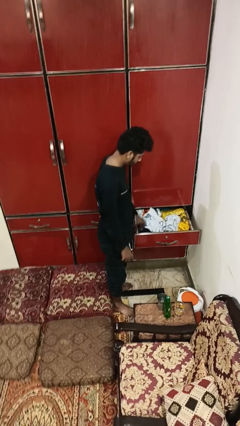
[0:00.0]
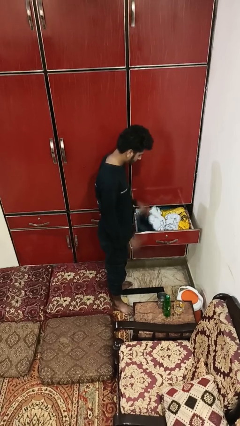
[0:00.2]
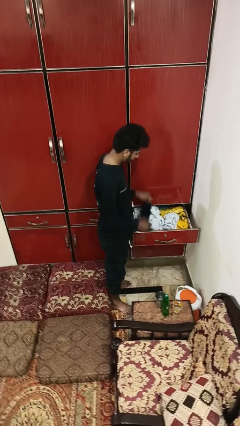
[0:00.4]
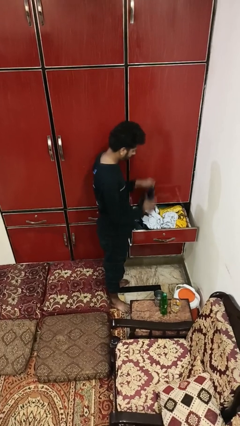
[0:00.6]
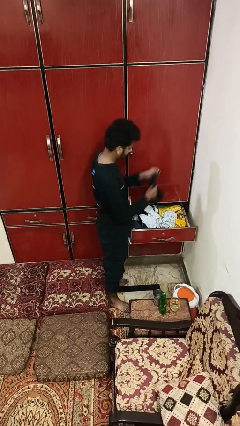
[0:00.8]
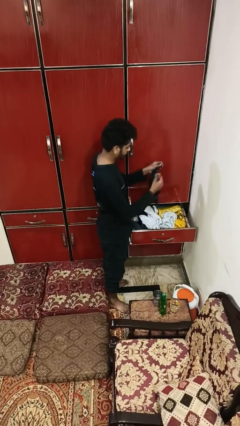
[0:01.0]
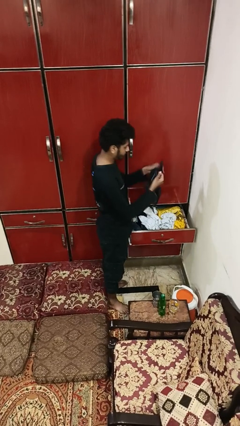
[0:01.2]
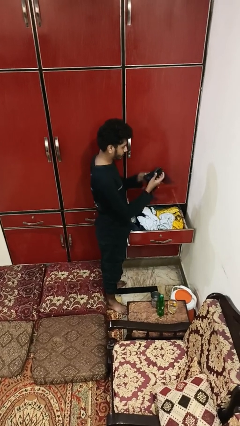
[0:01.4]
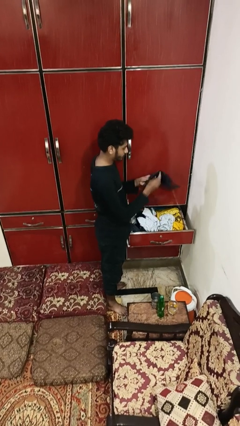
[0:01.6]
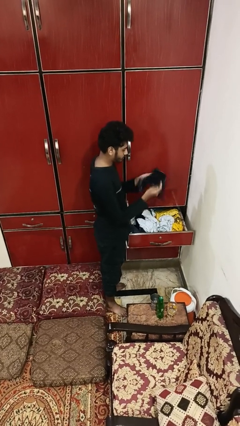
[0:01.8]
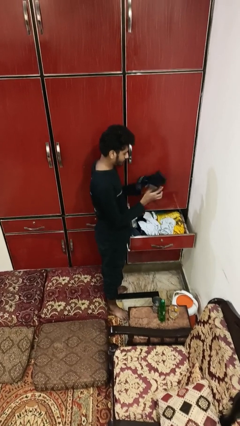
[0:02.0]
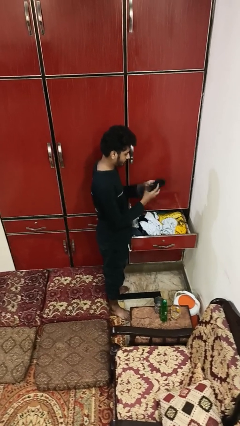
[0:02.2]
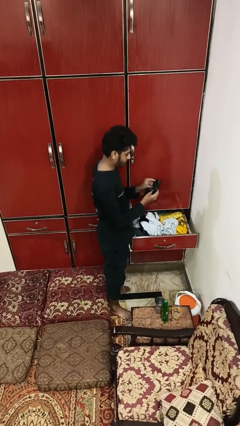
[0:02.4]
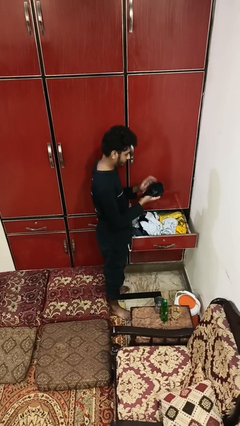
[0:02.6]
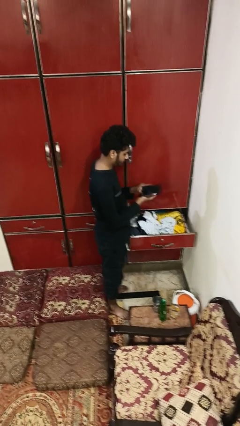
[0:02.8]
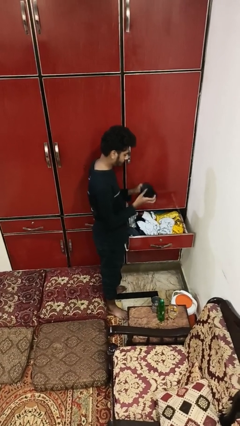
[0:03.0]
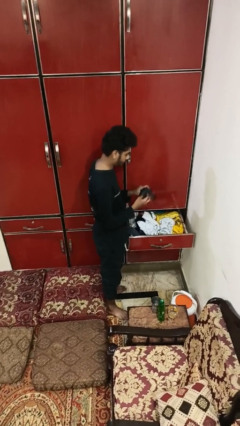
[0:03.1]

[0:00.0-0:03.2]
person takes clothes from dresser

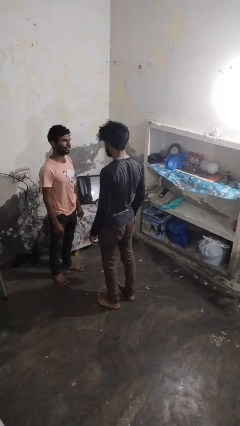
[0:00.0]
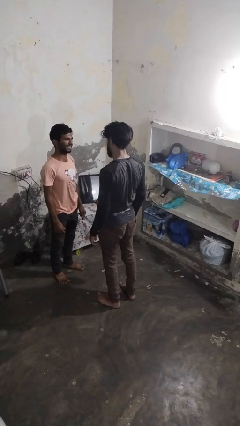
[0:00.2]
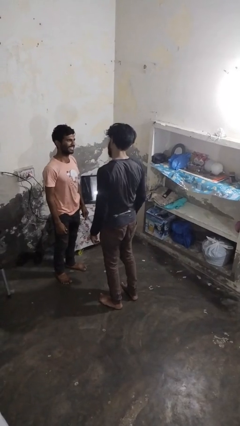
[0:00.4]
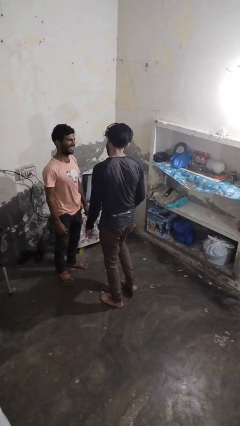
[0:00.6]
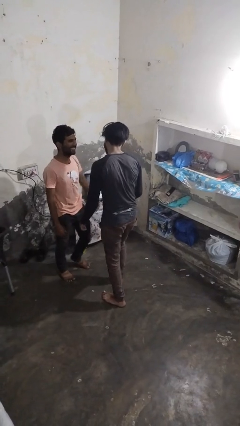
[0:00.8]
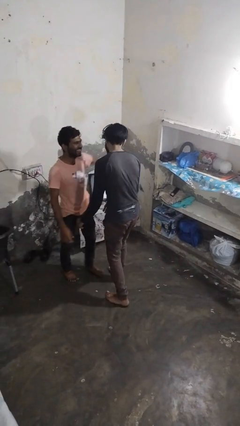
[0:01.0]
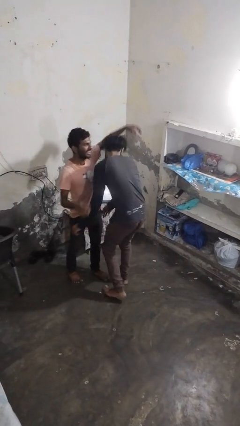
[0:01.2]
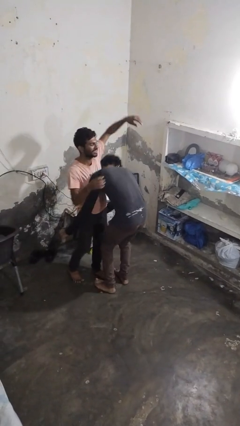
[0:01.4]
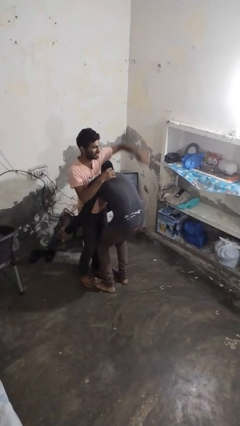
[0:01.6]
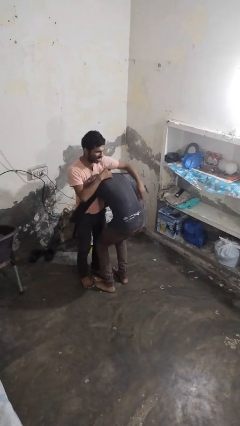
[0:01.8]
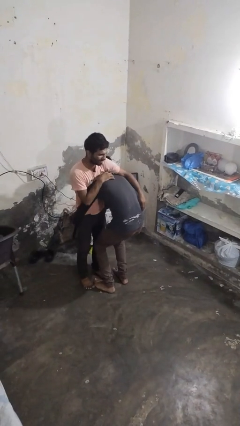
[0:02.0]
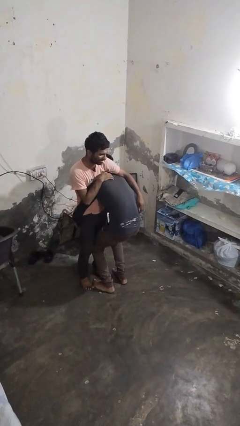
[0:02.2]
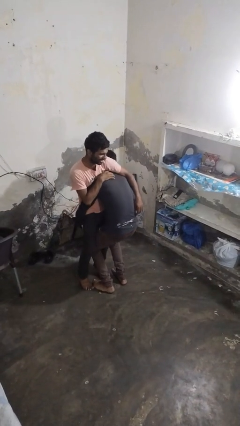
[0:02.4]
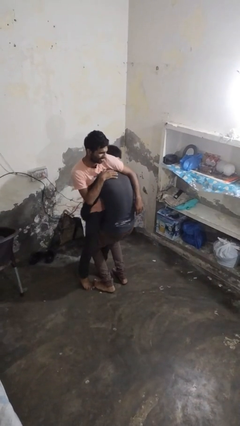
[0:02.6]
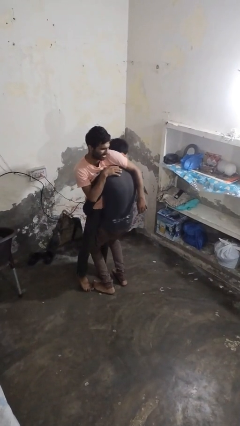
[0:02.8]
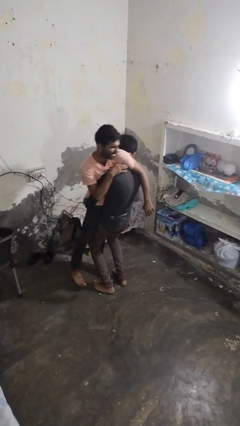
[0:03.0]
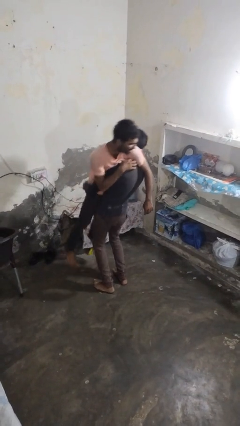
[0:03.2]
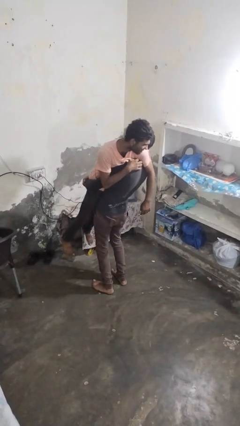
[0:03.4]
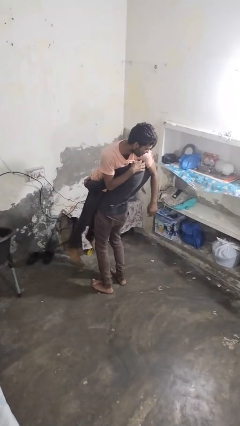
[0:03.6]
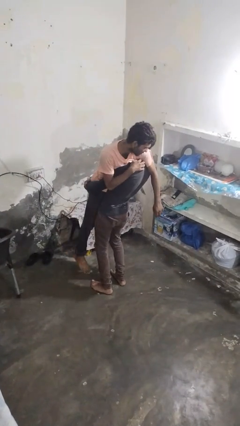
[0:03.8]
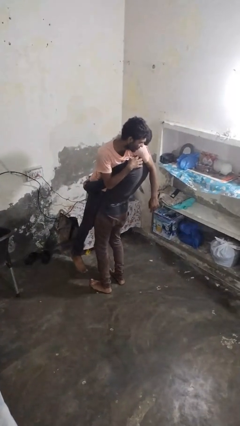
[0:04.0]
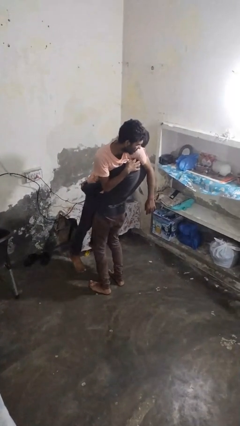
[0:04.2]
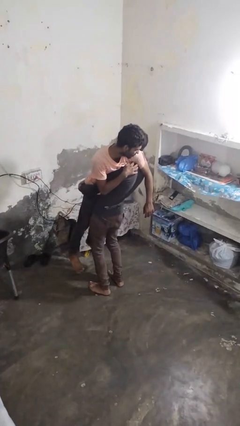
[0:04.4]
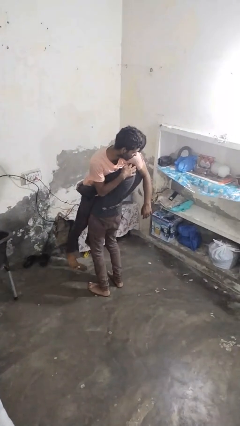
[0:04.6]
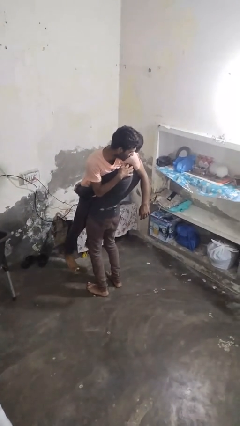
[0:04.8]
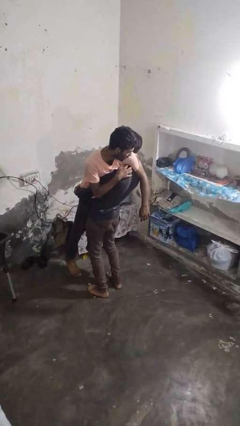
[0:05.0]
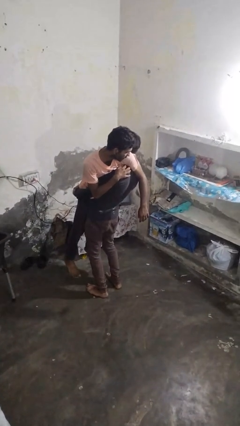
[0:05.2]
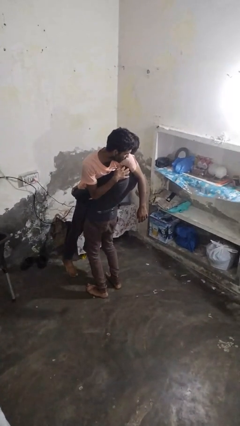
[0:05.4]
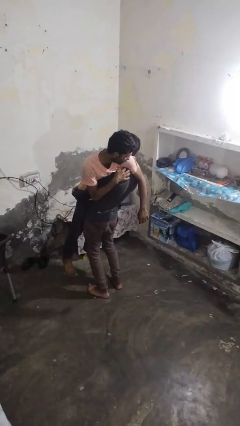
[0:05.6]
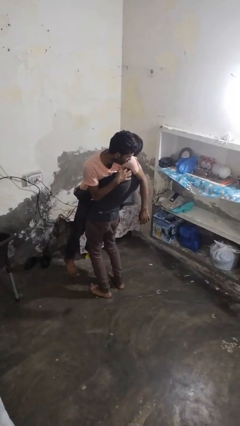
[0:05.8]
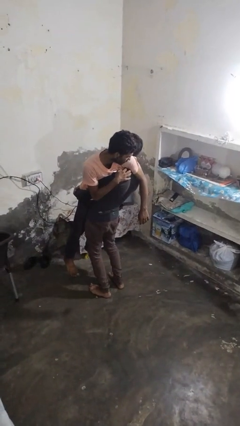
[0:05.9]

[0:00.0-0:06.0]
person picks up person

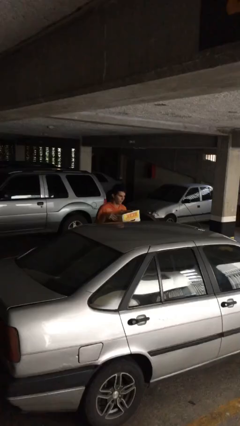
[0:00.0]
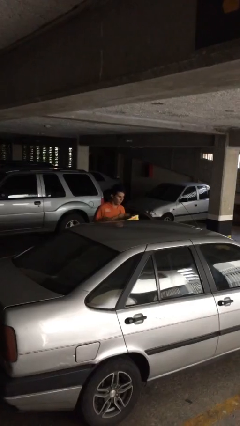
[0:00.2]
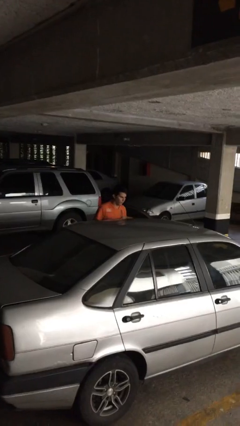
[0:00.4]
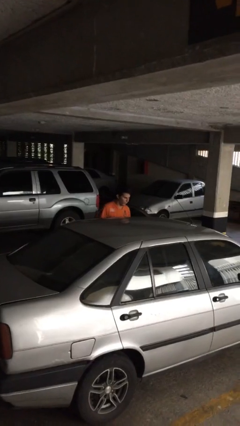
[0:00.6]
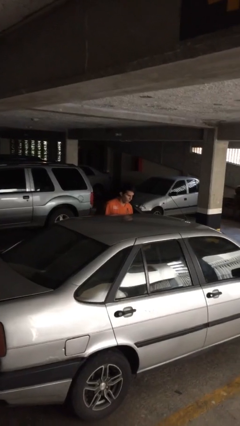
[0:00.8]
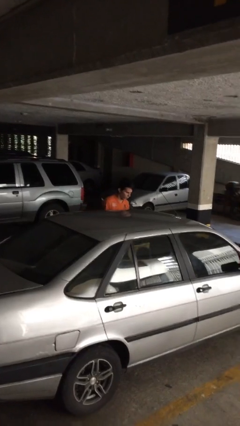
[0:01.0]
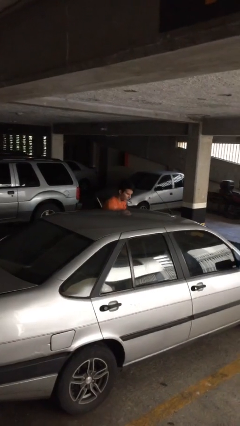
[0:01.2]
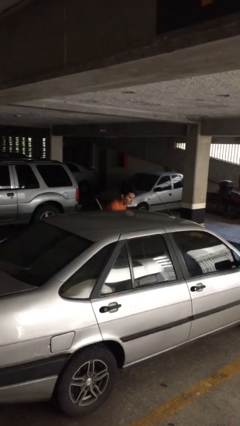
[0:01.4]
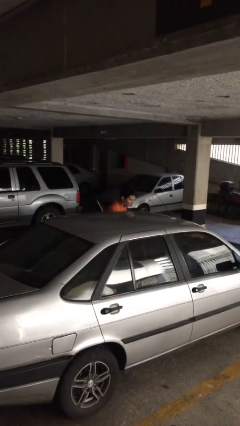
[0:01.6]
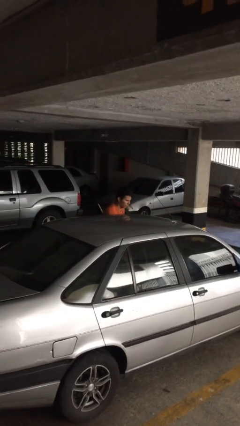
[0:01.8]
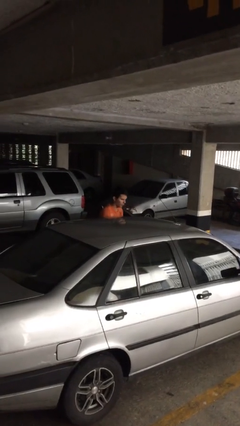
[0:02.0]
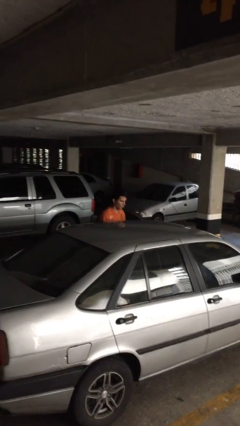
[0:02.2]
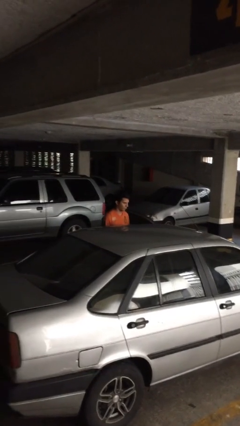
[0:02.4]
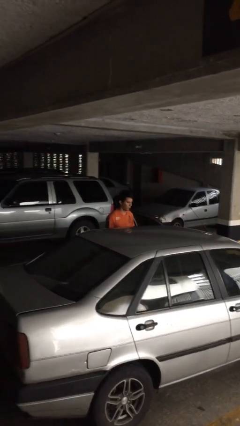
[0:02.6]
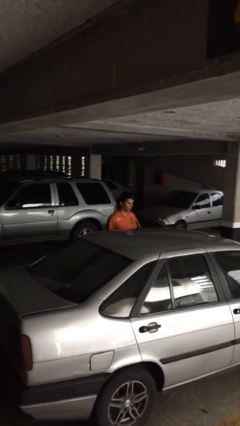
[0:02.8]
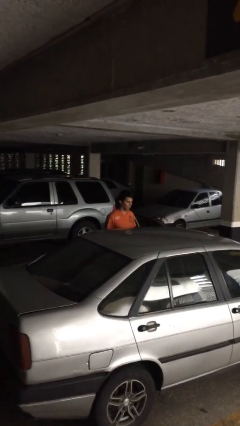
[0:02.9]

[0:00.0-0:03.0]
person loads car

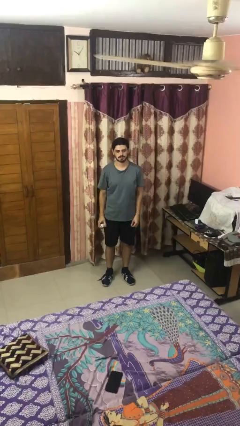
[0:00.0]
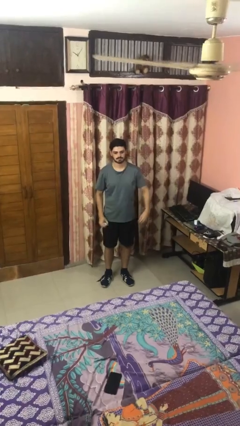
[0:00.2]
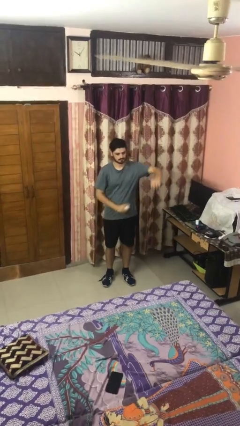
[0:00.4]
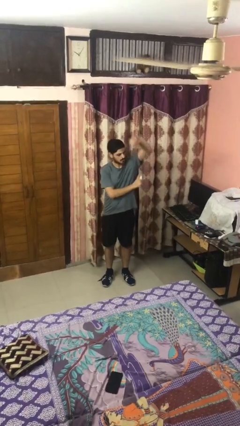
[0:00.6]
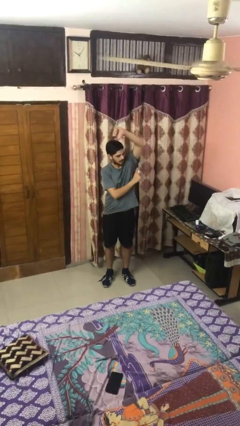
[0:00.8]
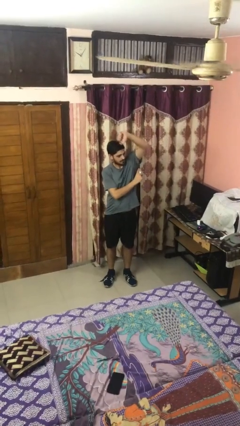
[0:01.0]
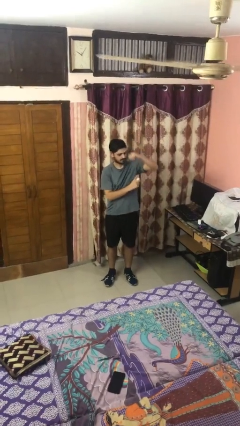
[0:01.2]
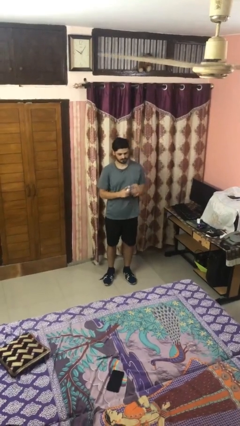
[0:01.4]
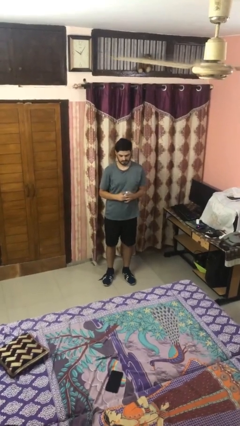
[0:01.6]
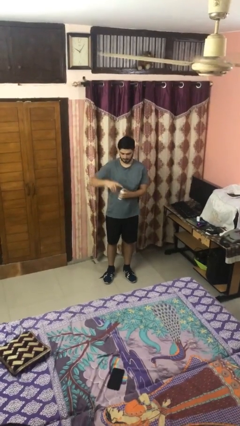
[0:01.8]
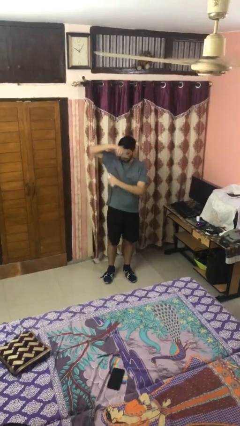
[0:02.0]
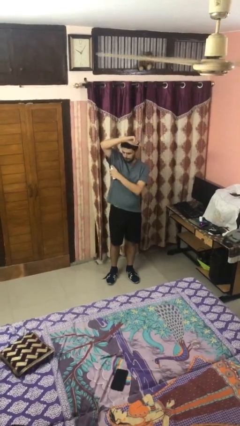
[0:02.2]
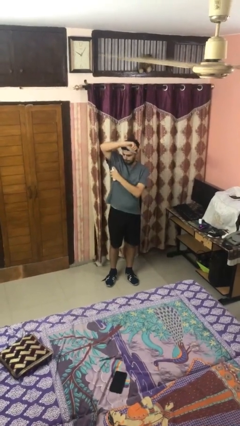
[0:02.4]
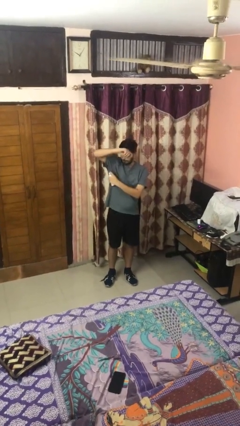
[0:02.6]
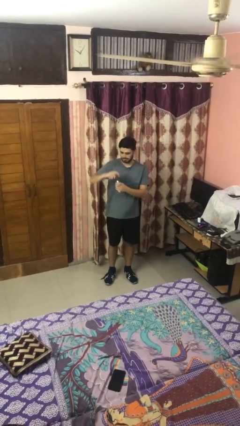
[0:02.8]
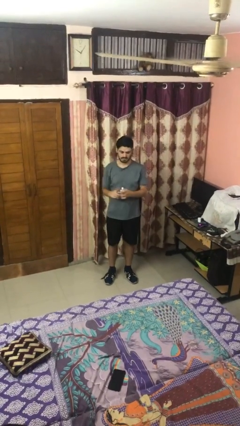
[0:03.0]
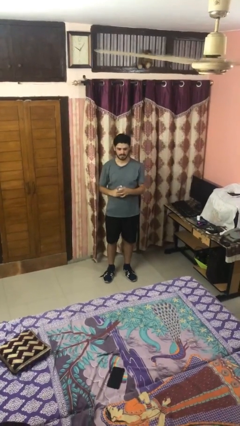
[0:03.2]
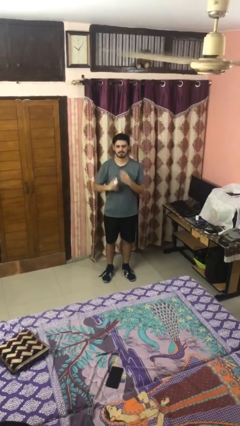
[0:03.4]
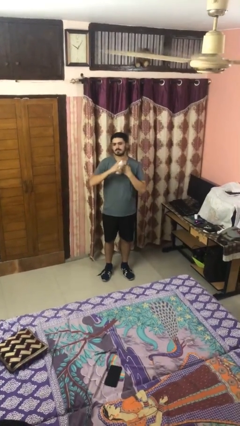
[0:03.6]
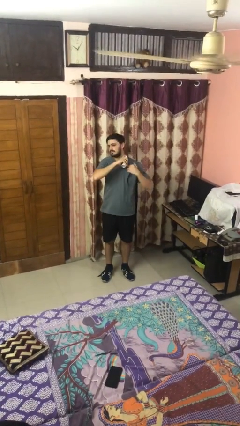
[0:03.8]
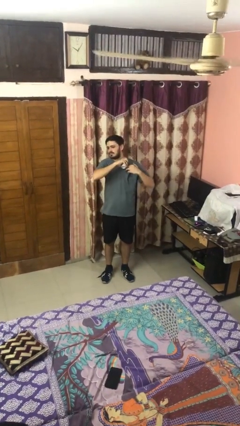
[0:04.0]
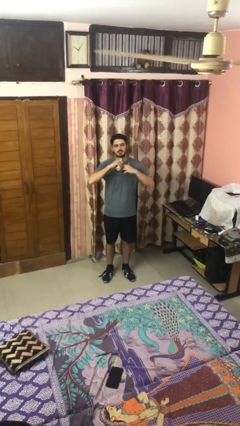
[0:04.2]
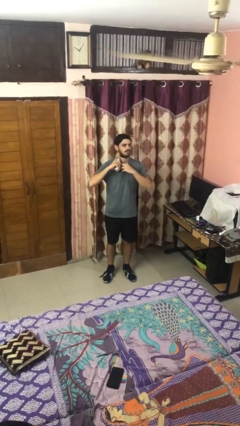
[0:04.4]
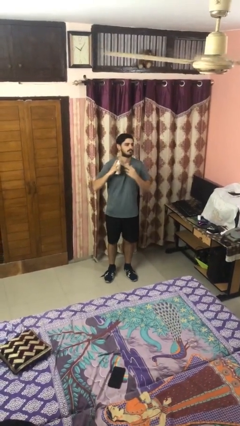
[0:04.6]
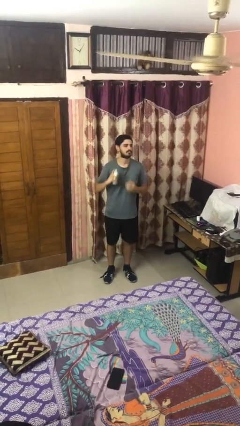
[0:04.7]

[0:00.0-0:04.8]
person applies deodorant

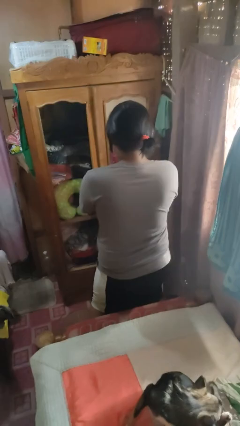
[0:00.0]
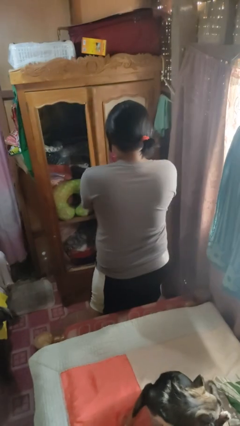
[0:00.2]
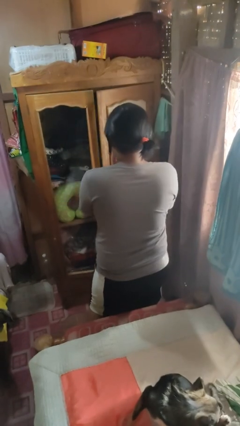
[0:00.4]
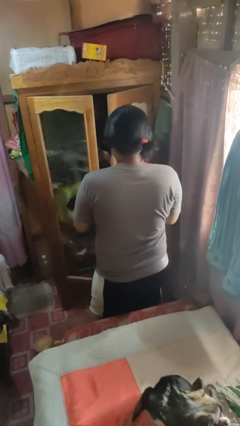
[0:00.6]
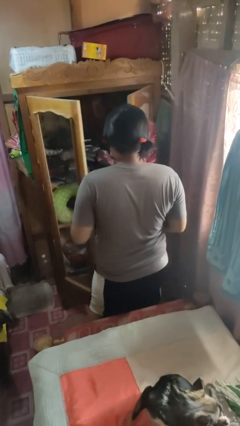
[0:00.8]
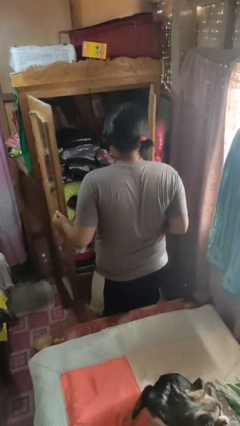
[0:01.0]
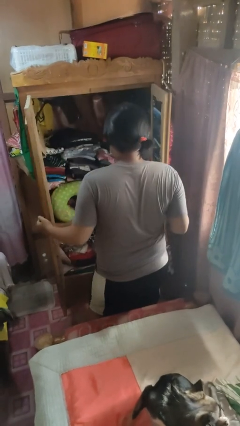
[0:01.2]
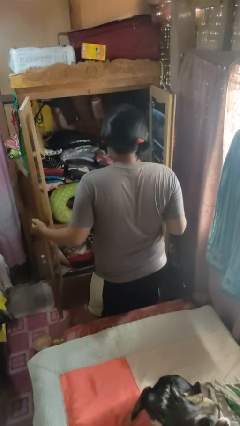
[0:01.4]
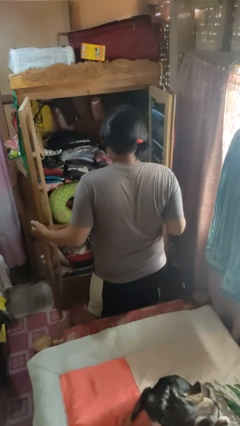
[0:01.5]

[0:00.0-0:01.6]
person opens closet door
